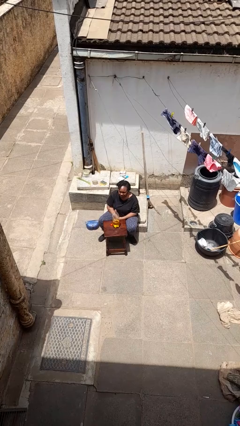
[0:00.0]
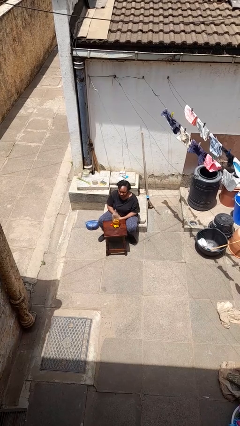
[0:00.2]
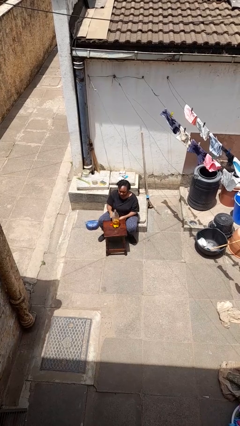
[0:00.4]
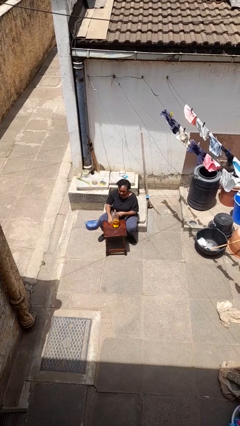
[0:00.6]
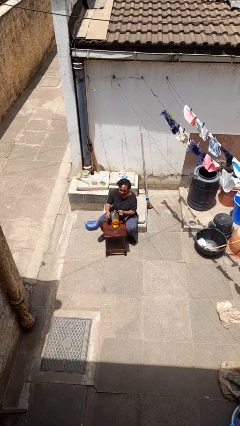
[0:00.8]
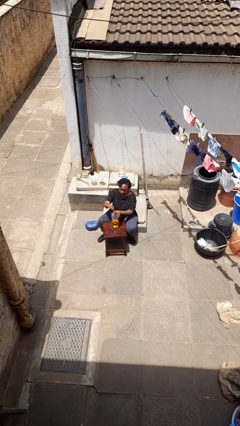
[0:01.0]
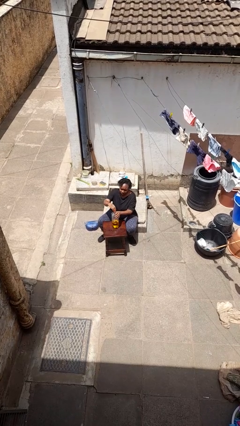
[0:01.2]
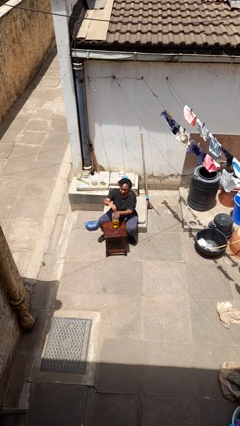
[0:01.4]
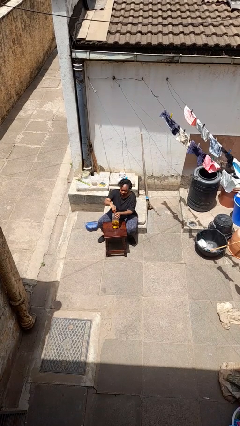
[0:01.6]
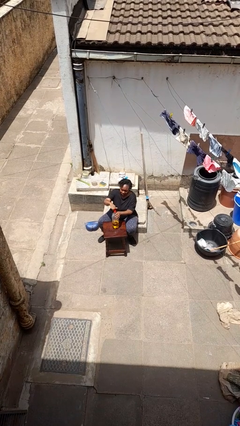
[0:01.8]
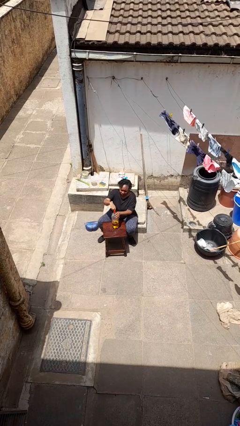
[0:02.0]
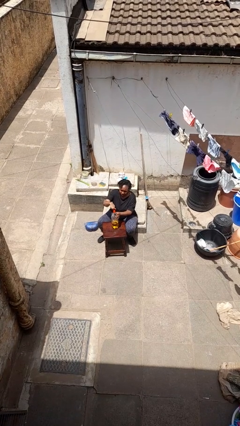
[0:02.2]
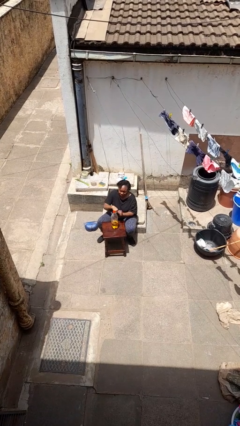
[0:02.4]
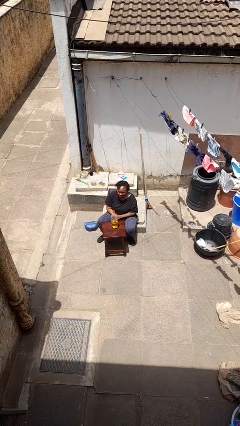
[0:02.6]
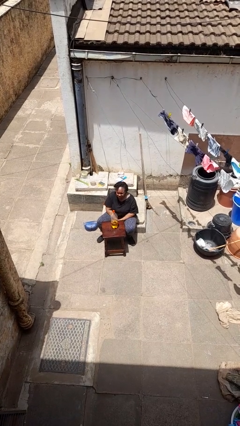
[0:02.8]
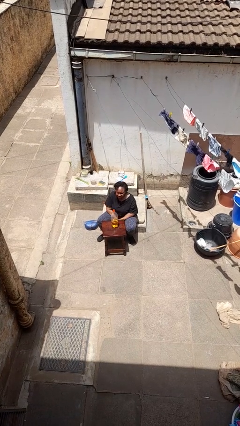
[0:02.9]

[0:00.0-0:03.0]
person screws lid to bottle

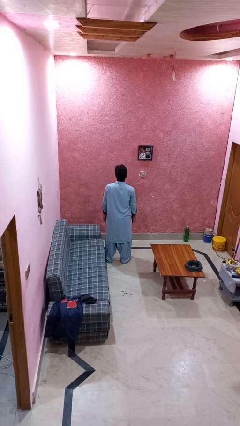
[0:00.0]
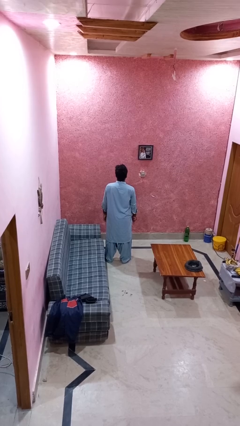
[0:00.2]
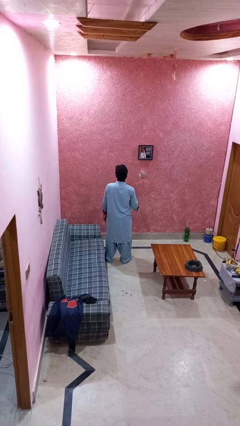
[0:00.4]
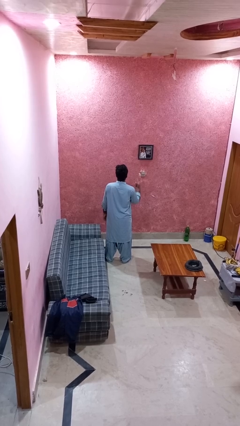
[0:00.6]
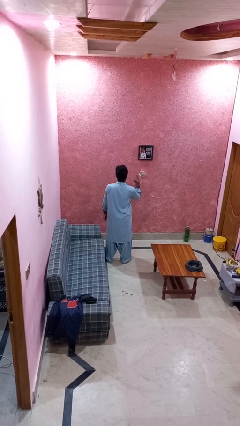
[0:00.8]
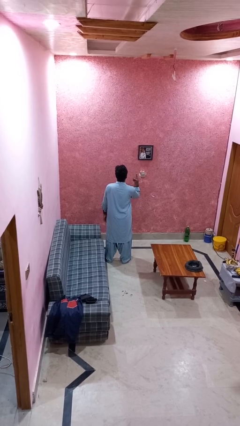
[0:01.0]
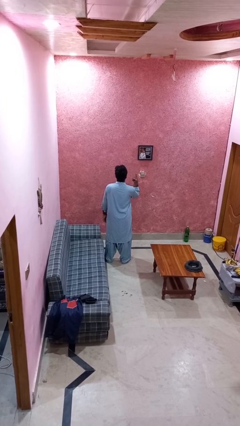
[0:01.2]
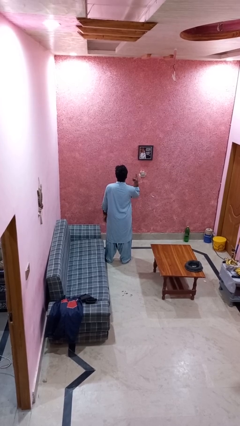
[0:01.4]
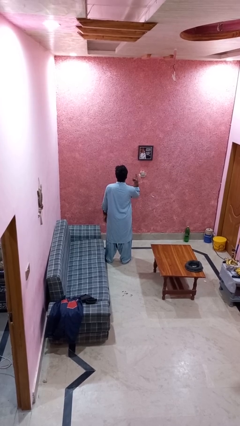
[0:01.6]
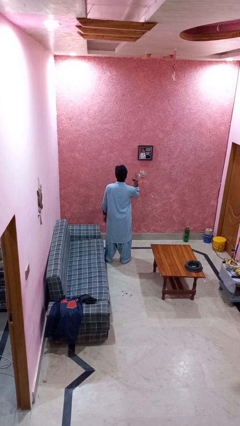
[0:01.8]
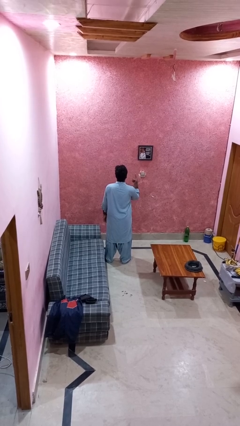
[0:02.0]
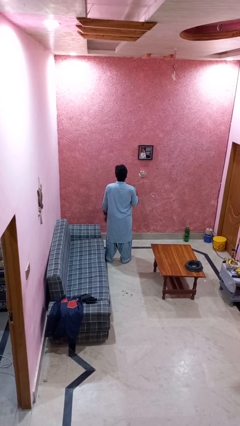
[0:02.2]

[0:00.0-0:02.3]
person gestures number one

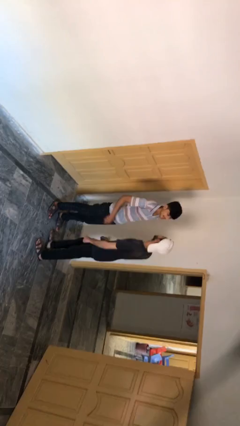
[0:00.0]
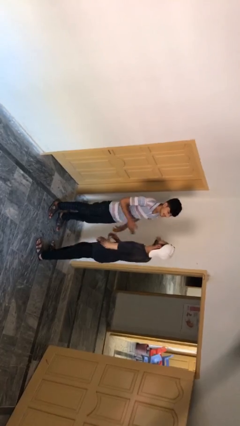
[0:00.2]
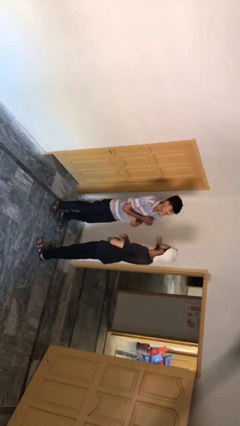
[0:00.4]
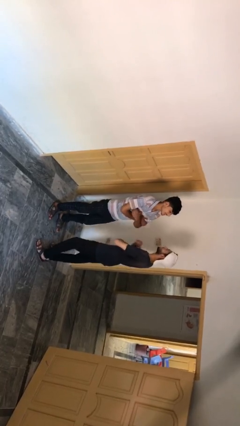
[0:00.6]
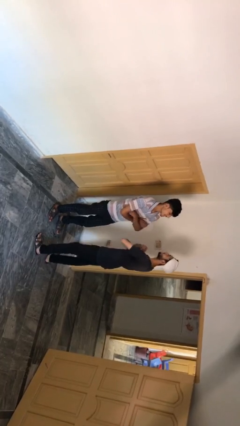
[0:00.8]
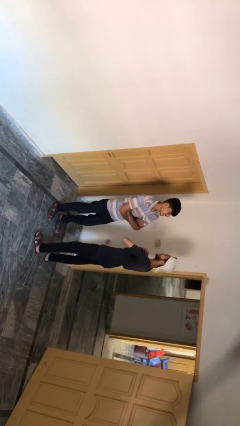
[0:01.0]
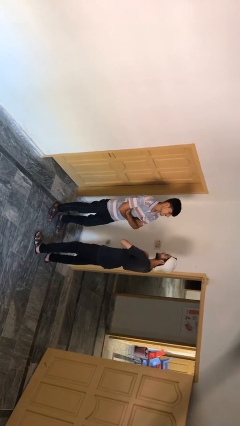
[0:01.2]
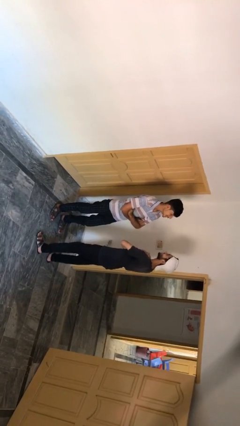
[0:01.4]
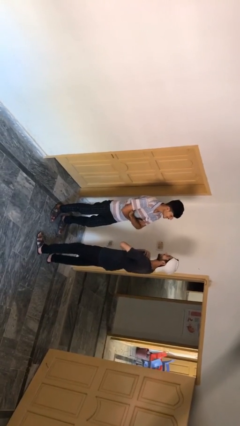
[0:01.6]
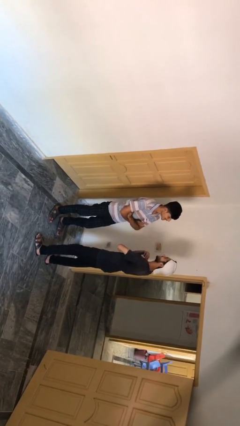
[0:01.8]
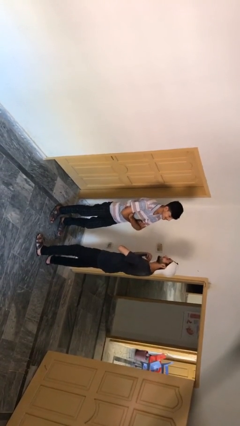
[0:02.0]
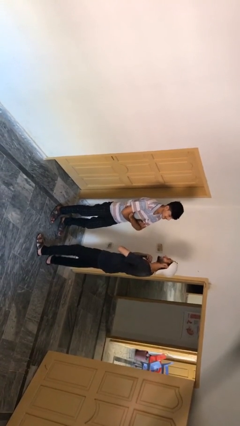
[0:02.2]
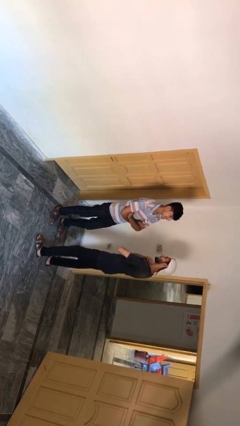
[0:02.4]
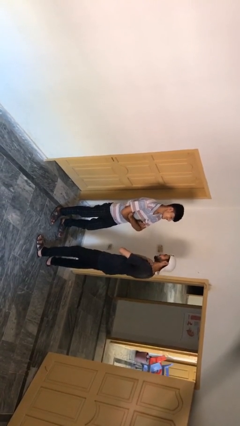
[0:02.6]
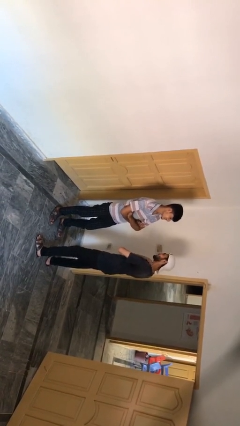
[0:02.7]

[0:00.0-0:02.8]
person talks to person

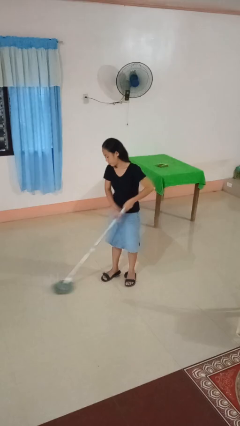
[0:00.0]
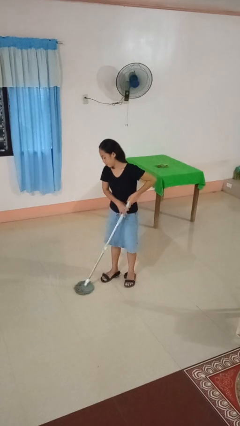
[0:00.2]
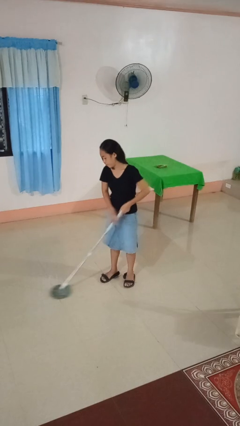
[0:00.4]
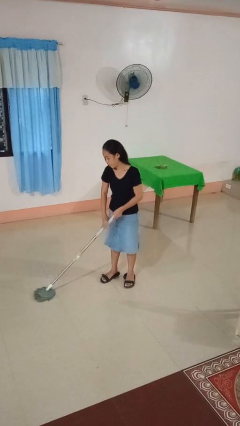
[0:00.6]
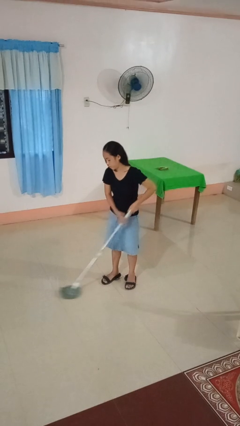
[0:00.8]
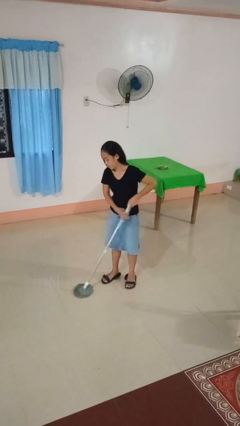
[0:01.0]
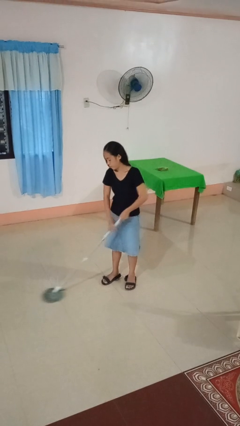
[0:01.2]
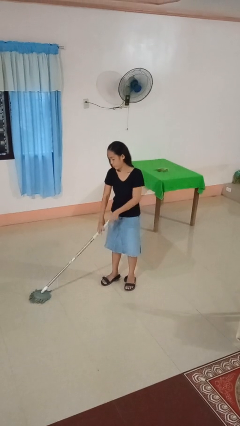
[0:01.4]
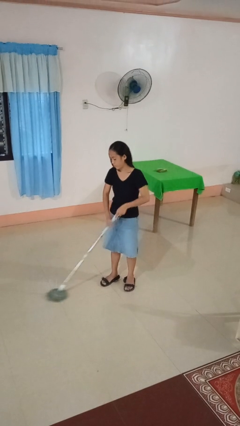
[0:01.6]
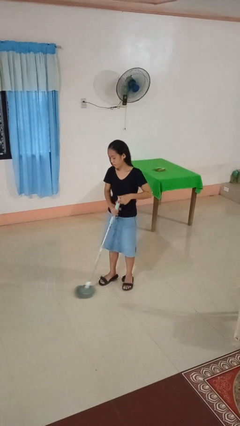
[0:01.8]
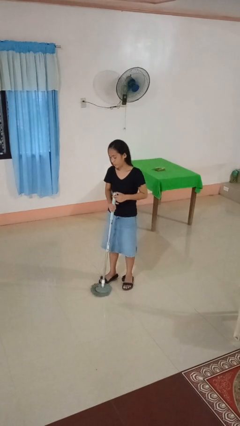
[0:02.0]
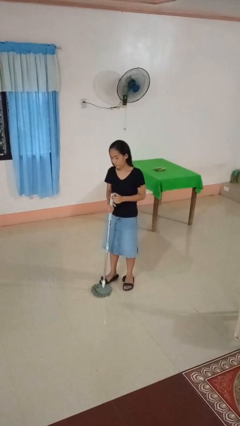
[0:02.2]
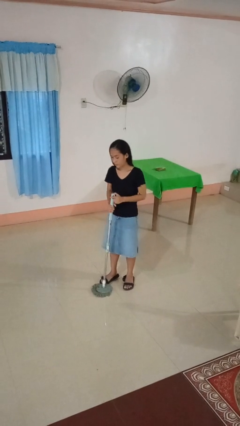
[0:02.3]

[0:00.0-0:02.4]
person mops

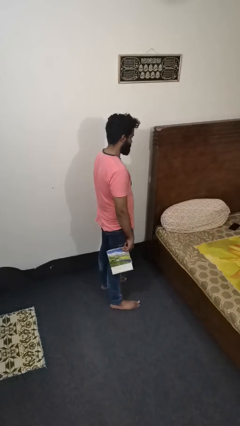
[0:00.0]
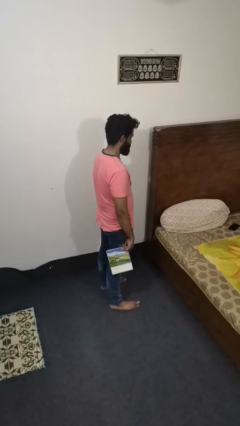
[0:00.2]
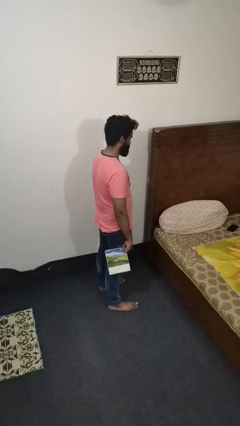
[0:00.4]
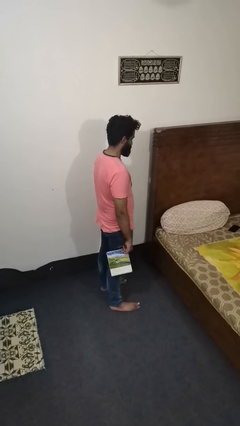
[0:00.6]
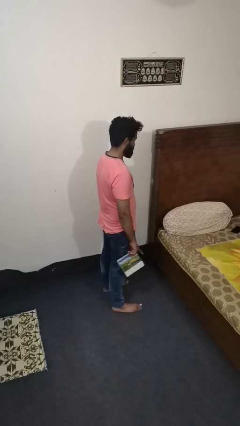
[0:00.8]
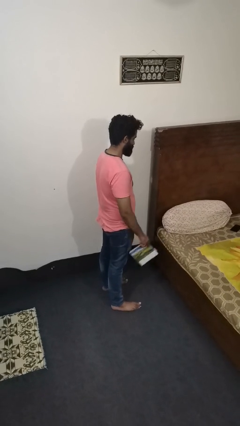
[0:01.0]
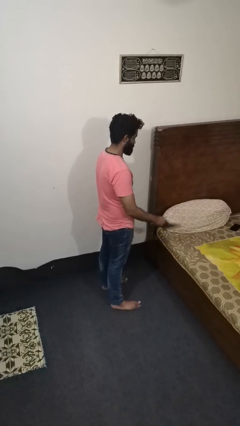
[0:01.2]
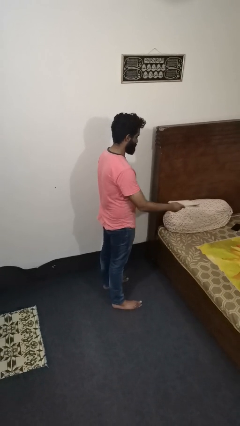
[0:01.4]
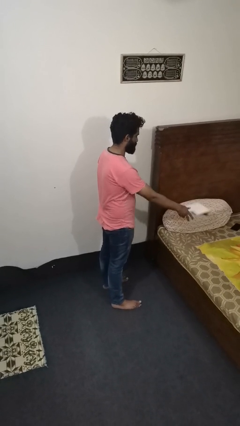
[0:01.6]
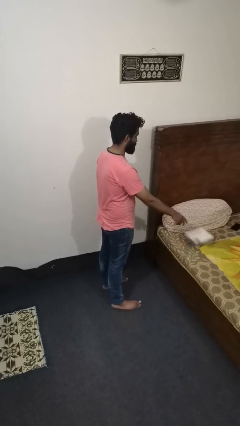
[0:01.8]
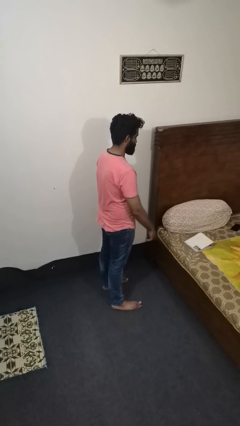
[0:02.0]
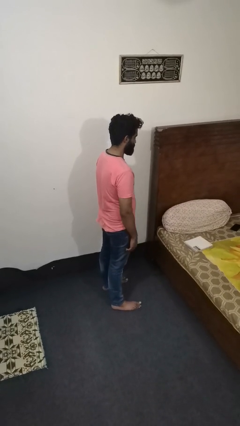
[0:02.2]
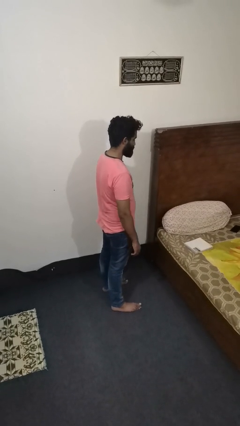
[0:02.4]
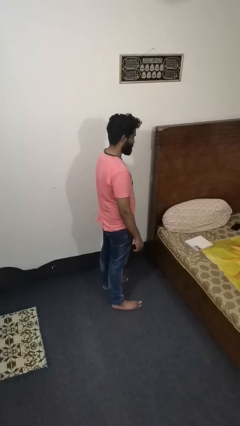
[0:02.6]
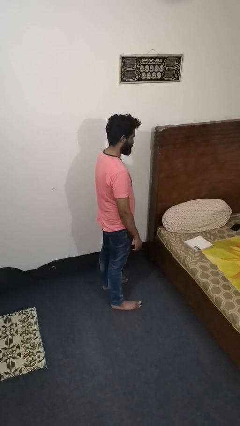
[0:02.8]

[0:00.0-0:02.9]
person throws object on bed

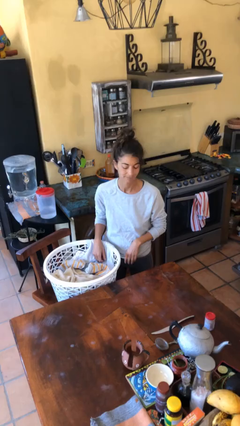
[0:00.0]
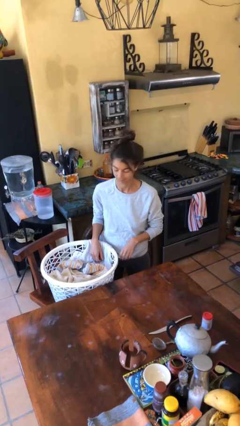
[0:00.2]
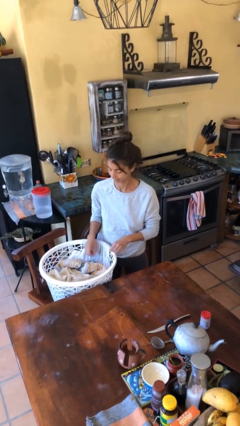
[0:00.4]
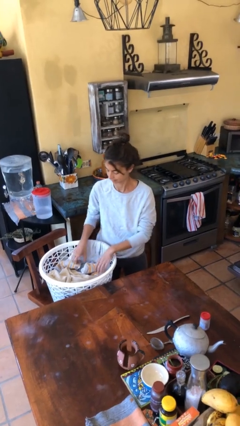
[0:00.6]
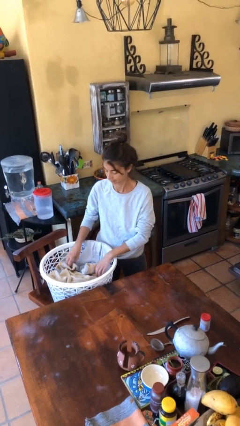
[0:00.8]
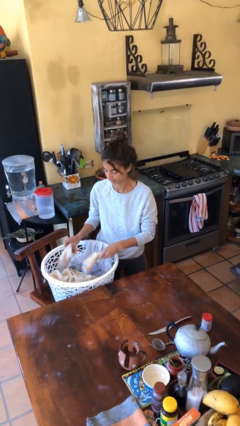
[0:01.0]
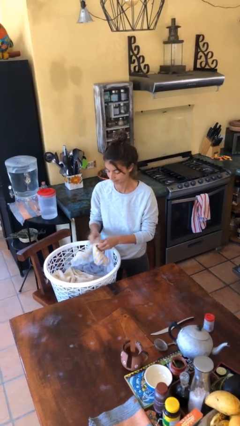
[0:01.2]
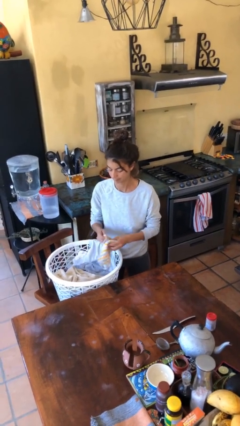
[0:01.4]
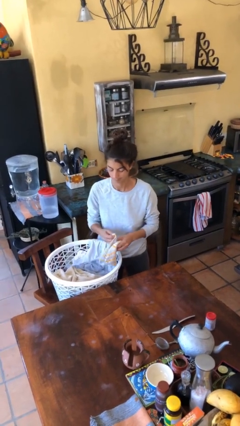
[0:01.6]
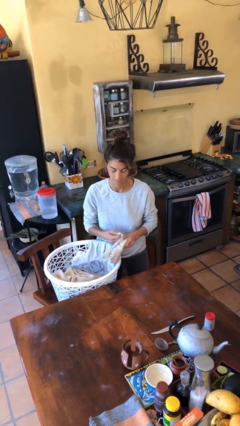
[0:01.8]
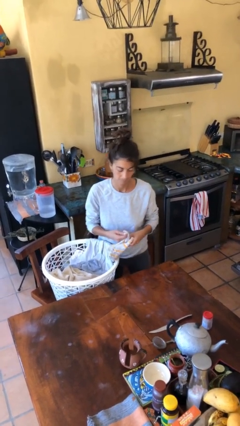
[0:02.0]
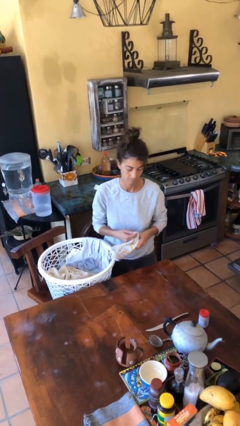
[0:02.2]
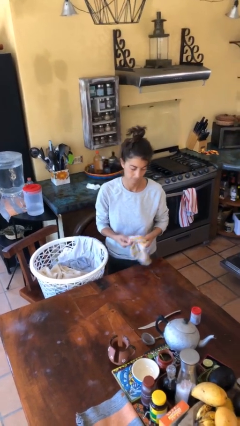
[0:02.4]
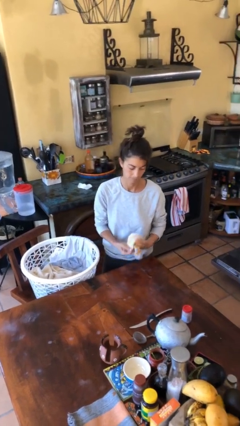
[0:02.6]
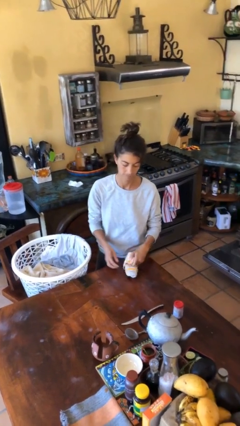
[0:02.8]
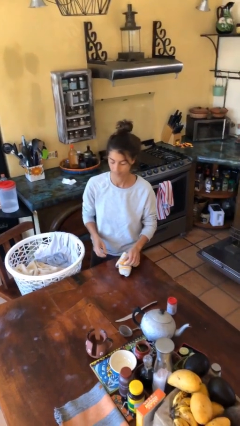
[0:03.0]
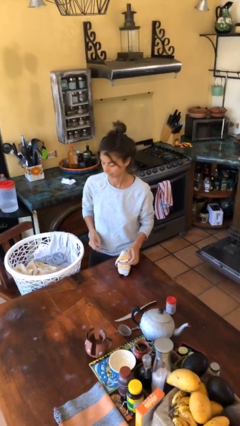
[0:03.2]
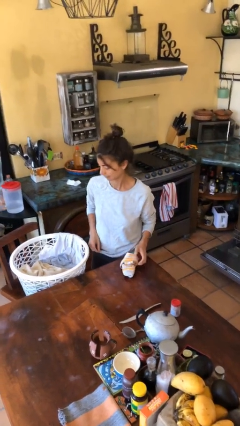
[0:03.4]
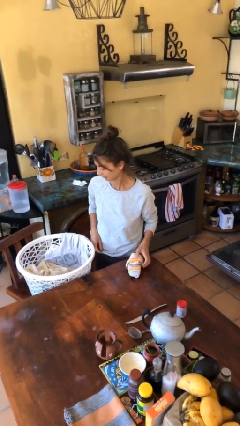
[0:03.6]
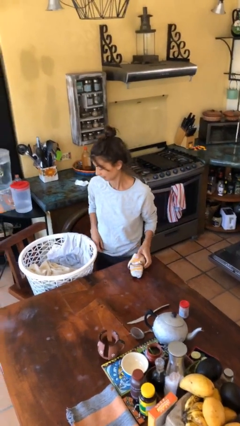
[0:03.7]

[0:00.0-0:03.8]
person folds socks

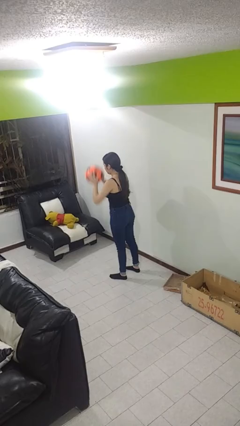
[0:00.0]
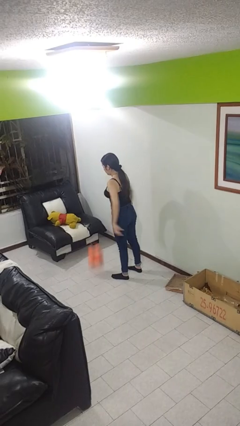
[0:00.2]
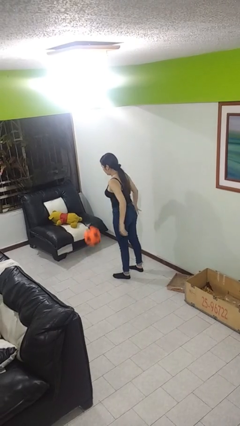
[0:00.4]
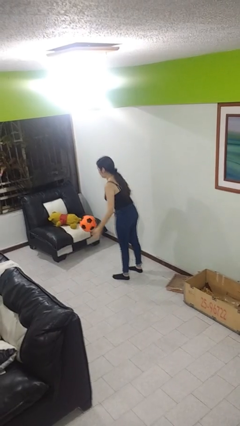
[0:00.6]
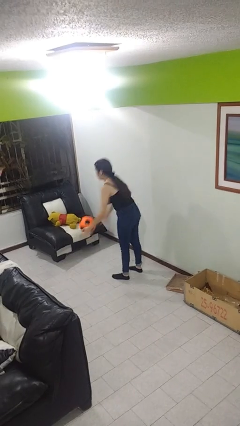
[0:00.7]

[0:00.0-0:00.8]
person bounces ball on floor
